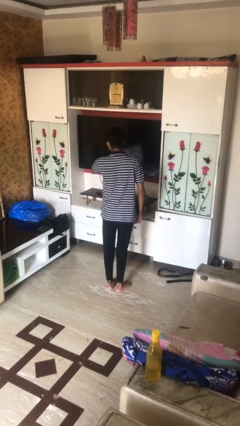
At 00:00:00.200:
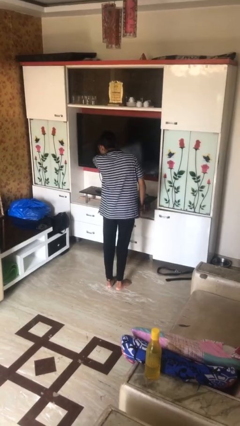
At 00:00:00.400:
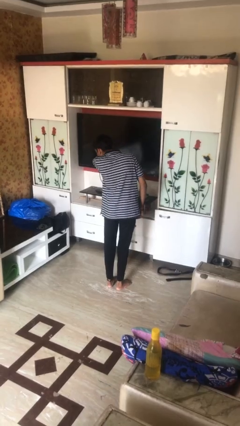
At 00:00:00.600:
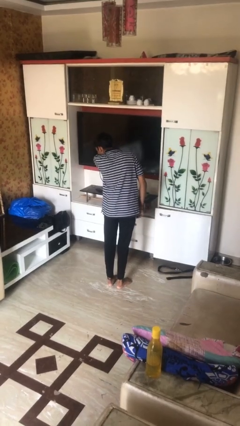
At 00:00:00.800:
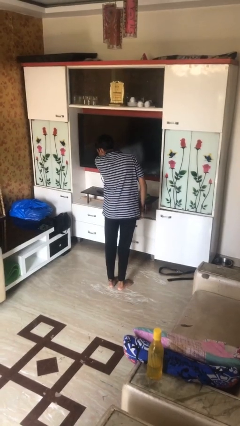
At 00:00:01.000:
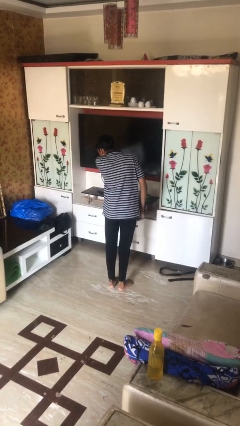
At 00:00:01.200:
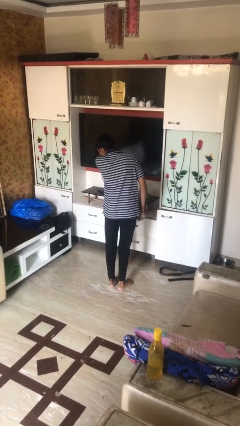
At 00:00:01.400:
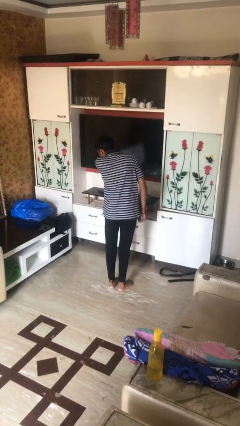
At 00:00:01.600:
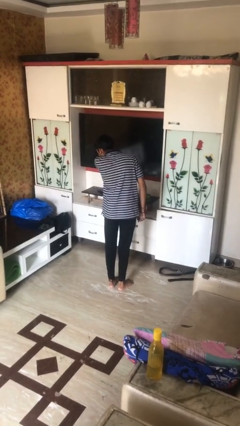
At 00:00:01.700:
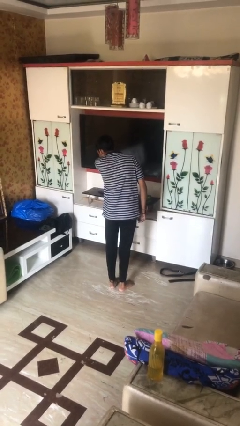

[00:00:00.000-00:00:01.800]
person sneezes into arm

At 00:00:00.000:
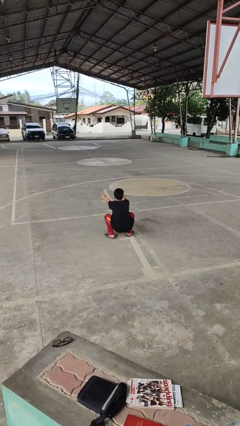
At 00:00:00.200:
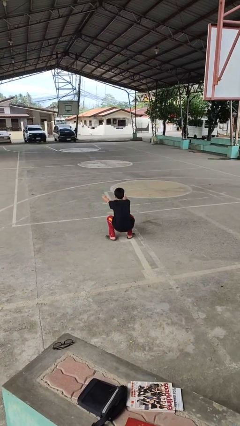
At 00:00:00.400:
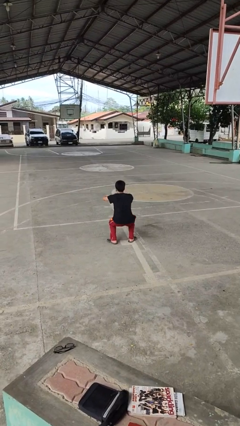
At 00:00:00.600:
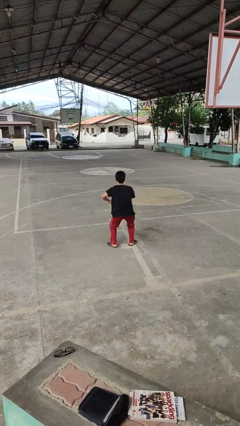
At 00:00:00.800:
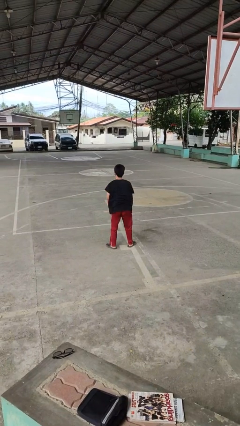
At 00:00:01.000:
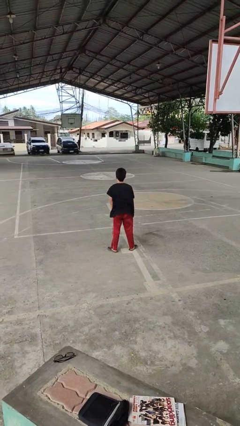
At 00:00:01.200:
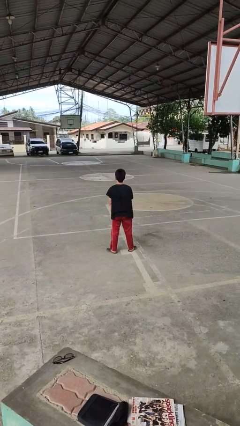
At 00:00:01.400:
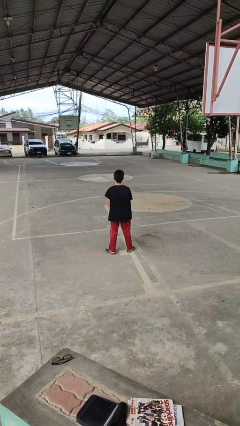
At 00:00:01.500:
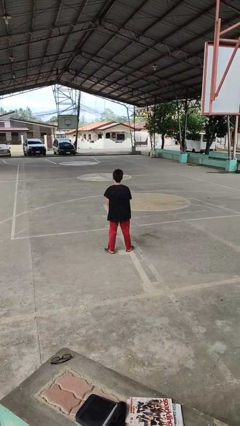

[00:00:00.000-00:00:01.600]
person stands up

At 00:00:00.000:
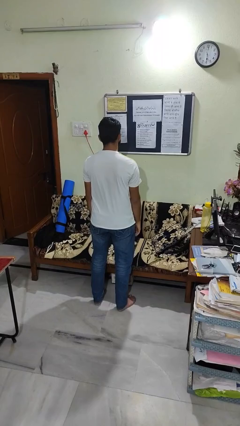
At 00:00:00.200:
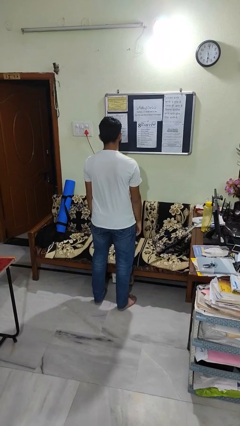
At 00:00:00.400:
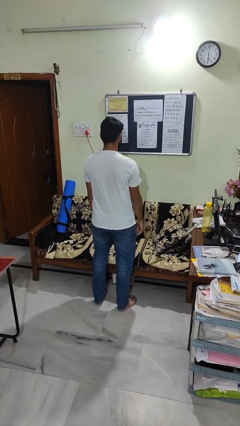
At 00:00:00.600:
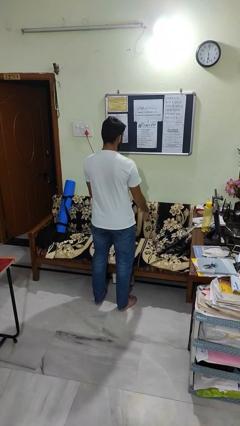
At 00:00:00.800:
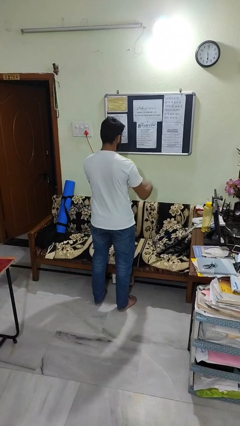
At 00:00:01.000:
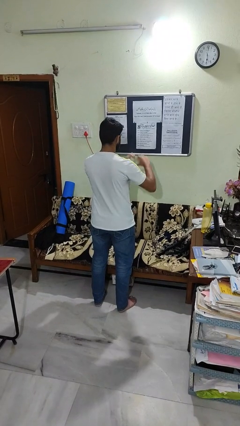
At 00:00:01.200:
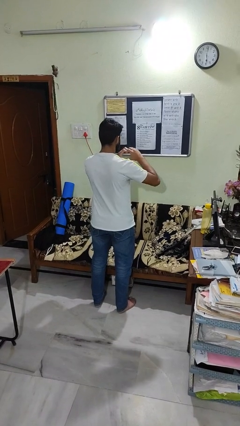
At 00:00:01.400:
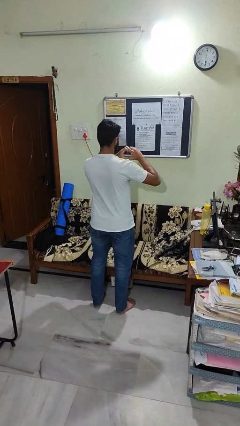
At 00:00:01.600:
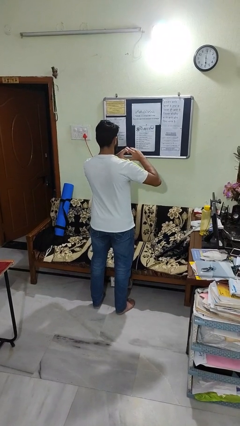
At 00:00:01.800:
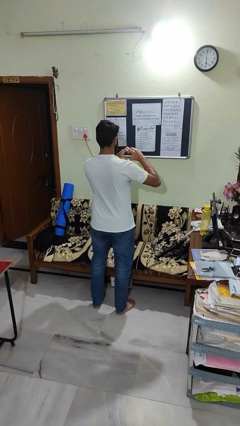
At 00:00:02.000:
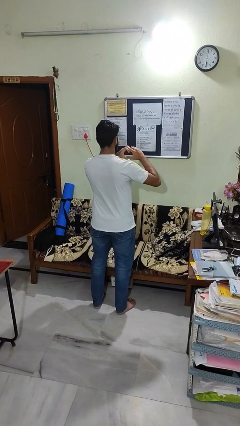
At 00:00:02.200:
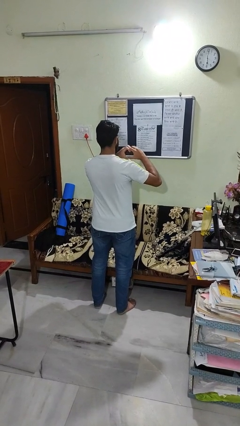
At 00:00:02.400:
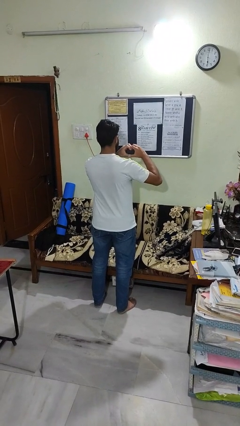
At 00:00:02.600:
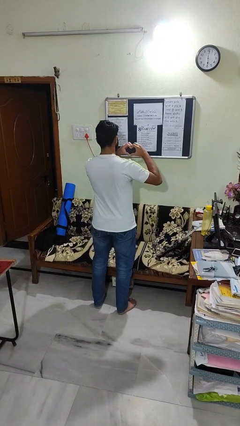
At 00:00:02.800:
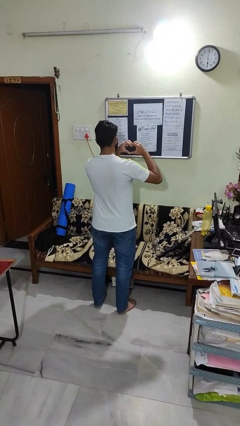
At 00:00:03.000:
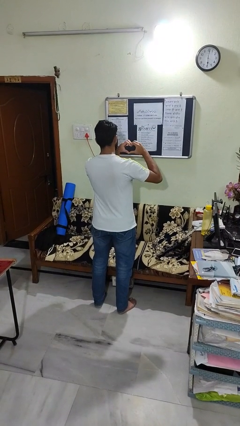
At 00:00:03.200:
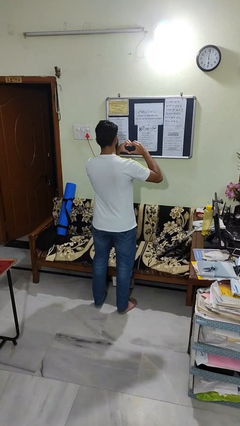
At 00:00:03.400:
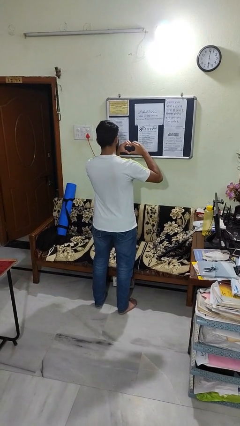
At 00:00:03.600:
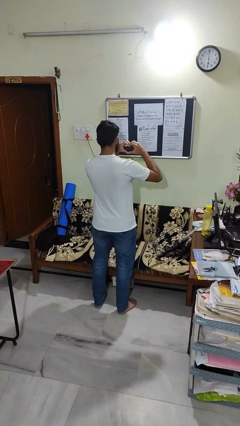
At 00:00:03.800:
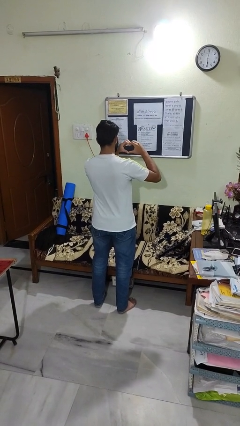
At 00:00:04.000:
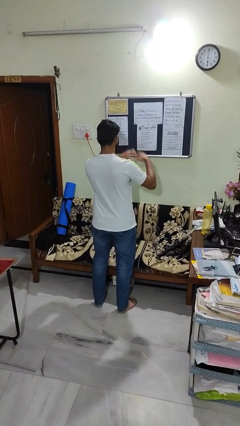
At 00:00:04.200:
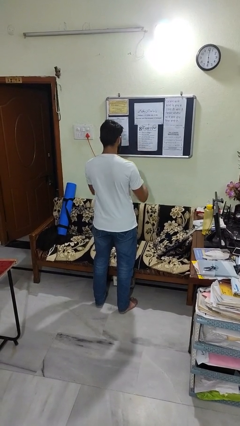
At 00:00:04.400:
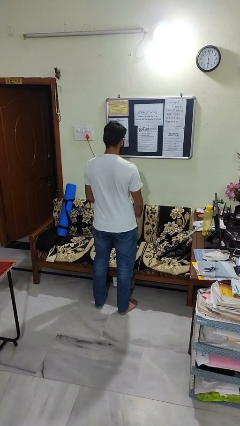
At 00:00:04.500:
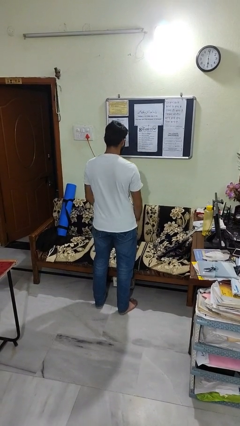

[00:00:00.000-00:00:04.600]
person gestures heart

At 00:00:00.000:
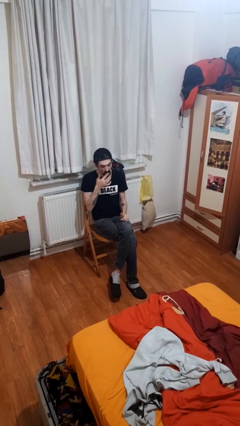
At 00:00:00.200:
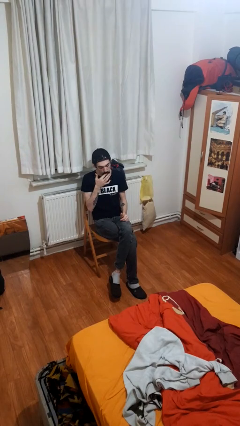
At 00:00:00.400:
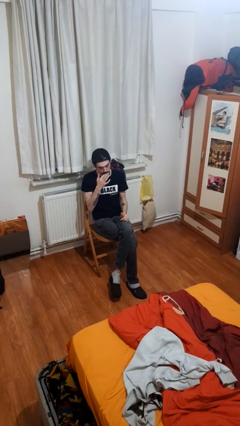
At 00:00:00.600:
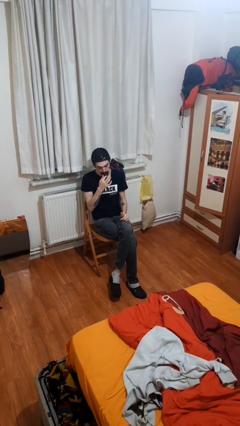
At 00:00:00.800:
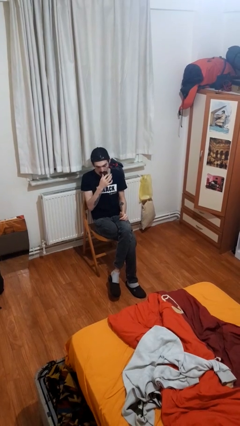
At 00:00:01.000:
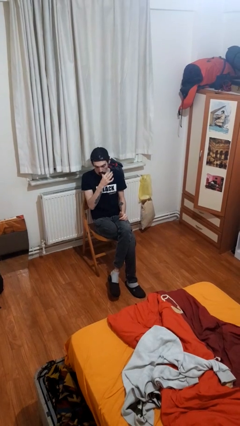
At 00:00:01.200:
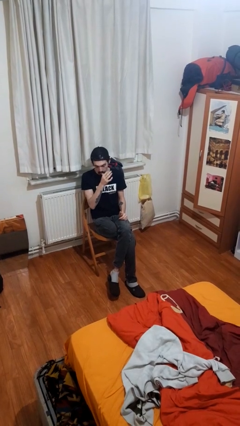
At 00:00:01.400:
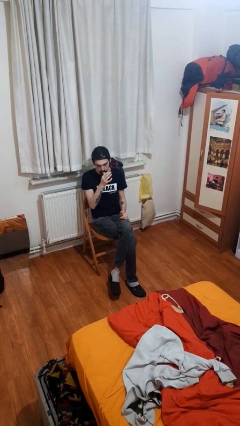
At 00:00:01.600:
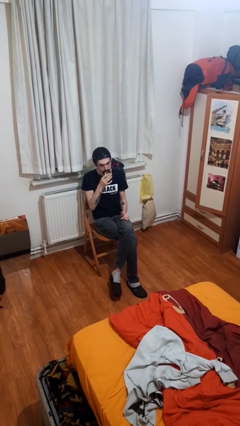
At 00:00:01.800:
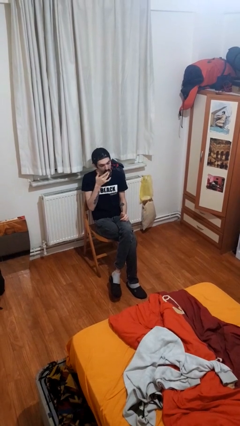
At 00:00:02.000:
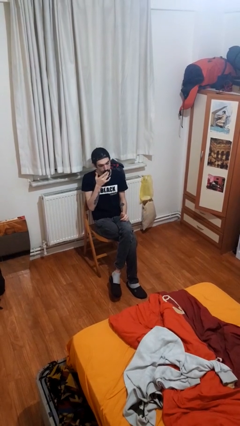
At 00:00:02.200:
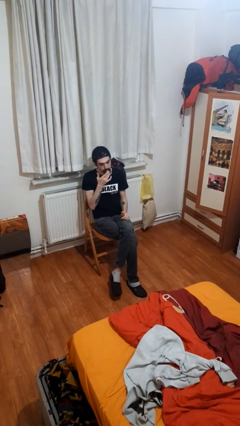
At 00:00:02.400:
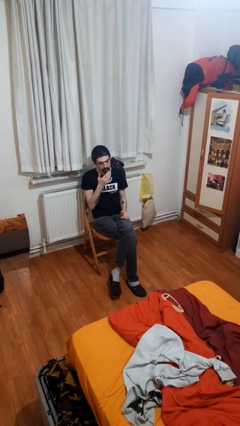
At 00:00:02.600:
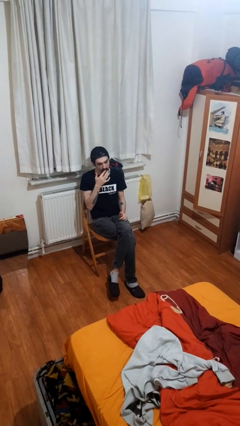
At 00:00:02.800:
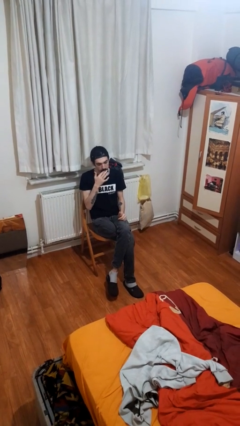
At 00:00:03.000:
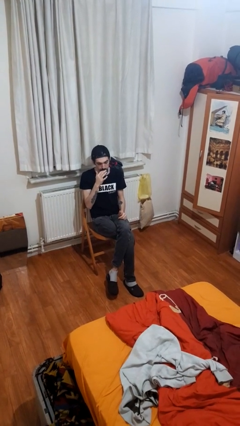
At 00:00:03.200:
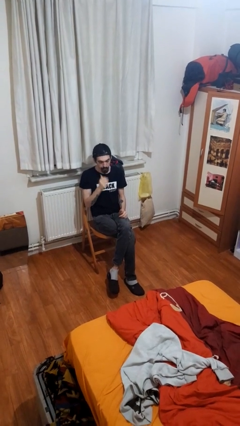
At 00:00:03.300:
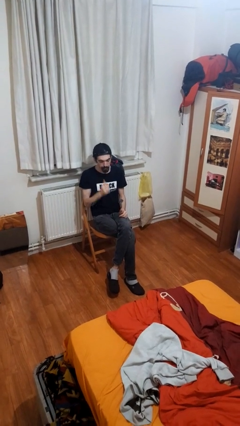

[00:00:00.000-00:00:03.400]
person licks fingers

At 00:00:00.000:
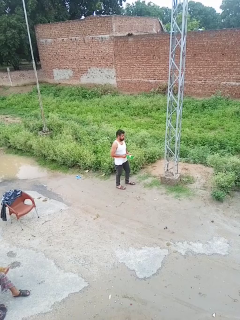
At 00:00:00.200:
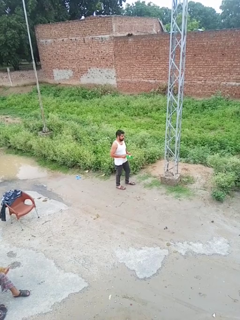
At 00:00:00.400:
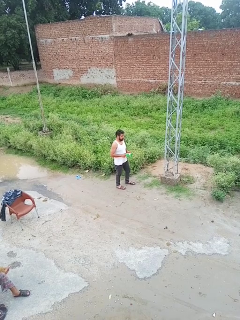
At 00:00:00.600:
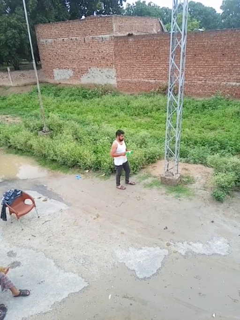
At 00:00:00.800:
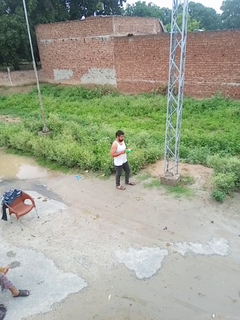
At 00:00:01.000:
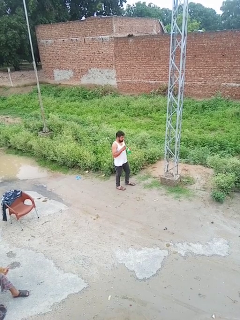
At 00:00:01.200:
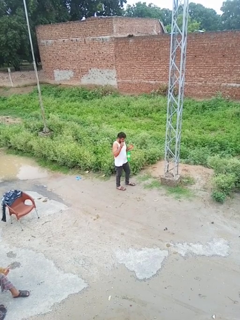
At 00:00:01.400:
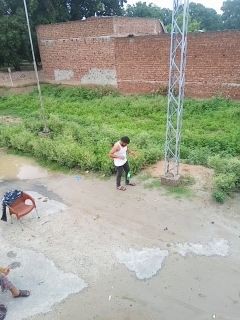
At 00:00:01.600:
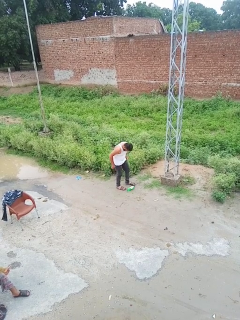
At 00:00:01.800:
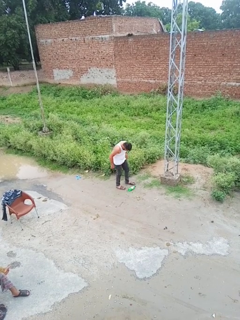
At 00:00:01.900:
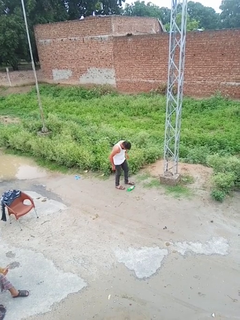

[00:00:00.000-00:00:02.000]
person drops object

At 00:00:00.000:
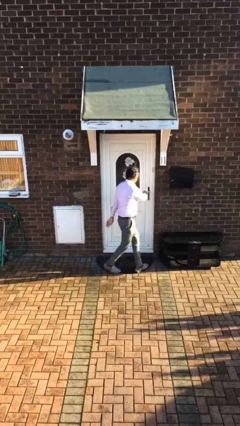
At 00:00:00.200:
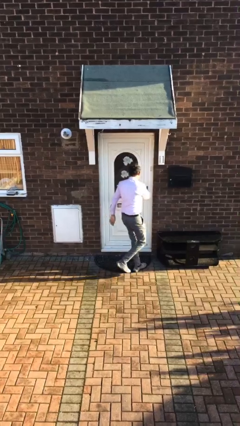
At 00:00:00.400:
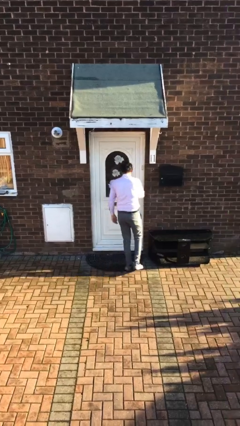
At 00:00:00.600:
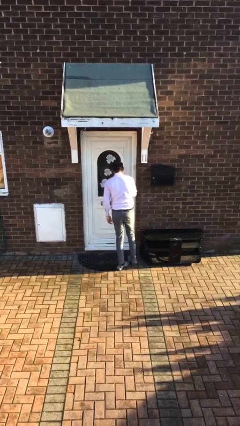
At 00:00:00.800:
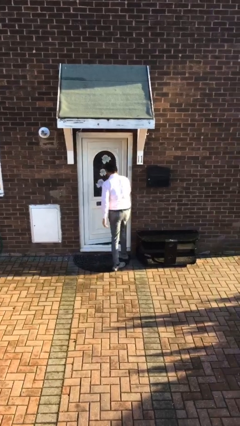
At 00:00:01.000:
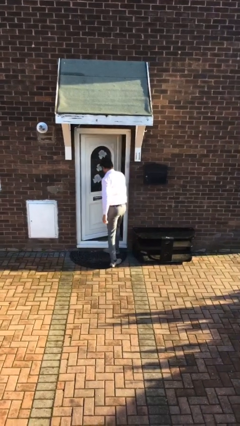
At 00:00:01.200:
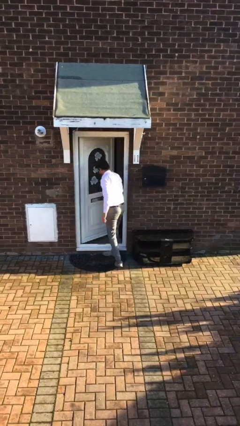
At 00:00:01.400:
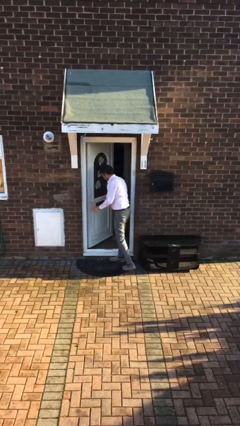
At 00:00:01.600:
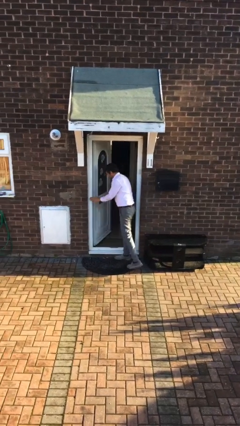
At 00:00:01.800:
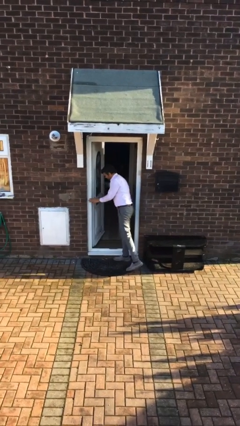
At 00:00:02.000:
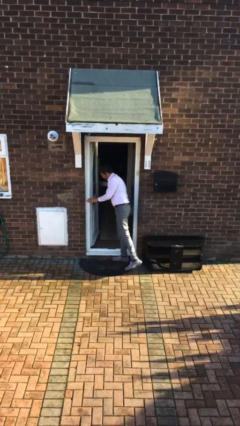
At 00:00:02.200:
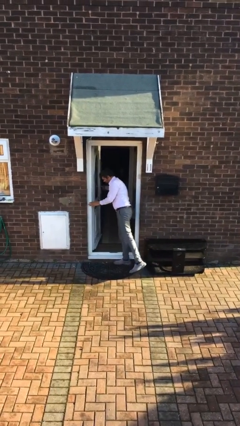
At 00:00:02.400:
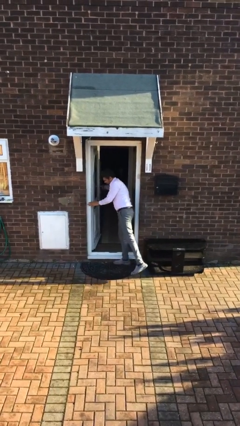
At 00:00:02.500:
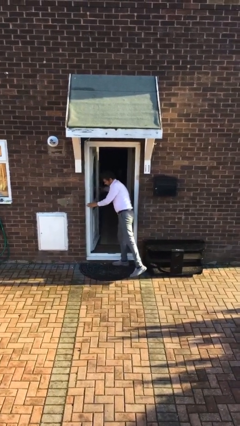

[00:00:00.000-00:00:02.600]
person opens facility door

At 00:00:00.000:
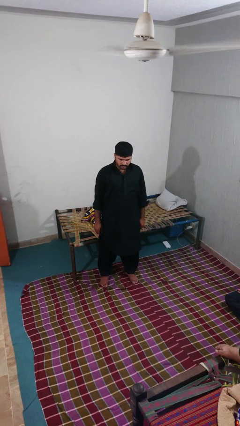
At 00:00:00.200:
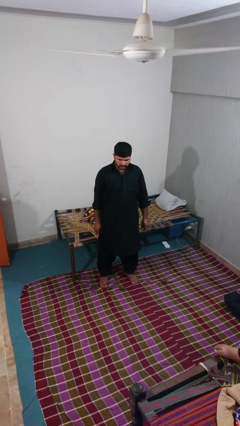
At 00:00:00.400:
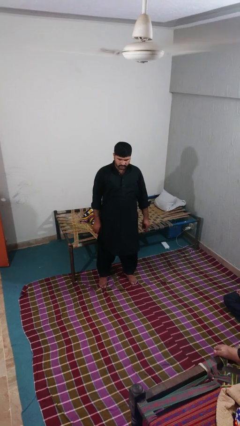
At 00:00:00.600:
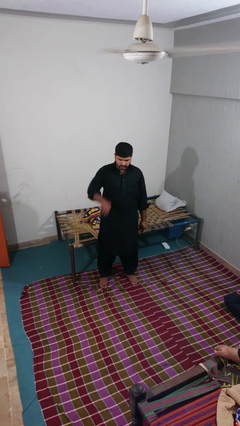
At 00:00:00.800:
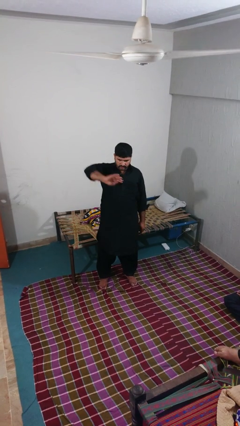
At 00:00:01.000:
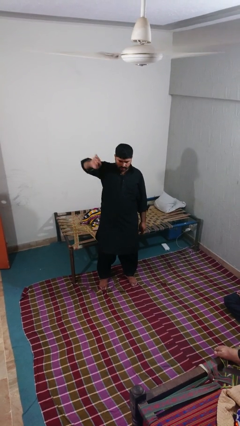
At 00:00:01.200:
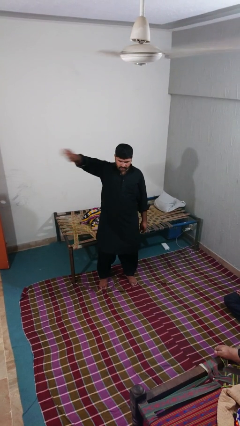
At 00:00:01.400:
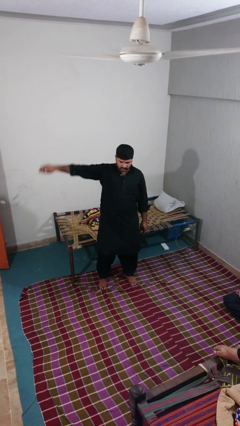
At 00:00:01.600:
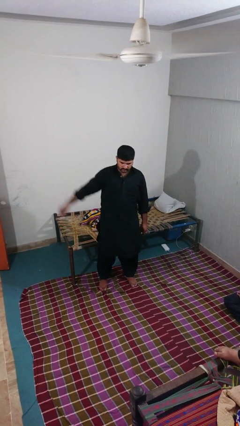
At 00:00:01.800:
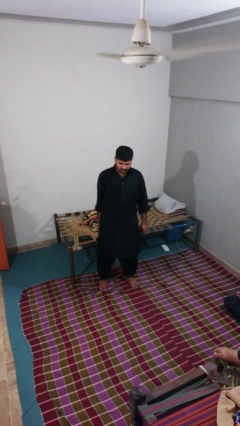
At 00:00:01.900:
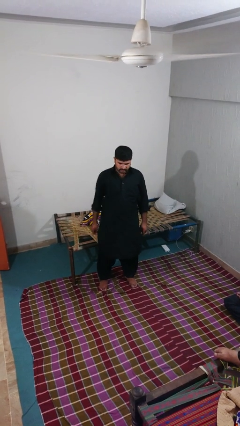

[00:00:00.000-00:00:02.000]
person gestures swipe right
